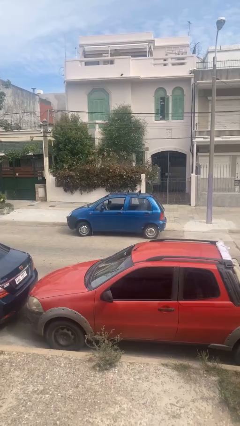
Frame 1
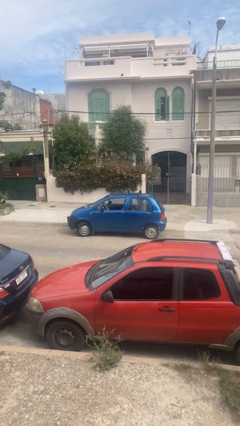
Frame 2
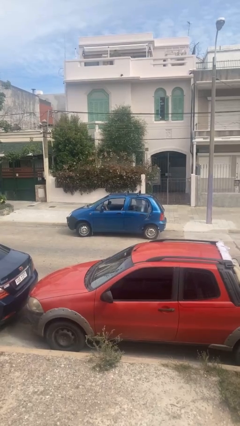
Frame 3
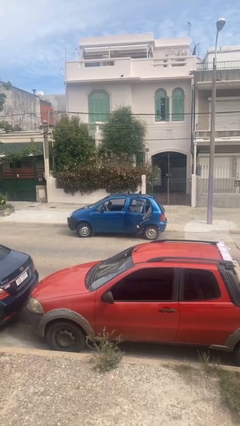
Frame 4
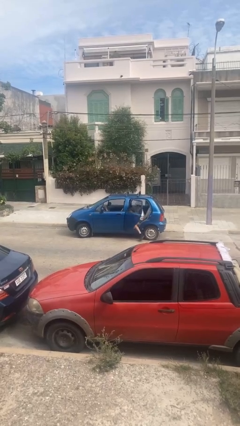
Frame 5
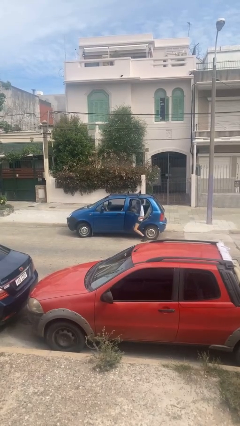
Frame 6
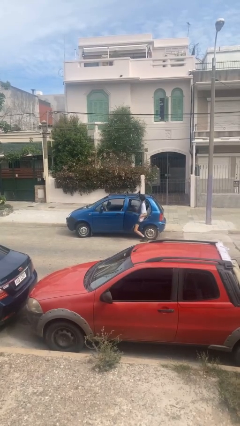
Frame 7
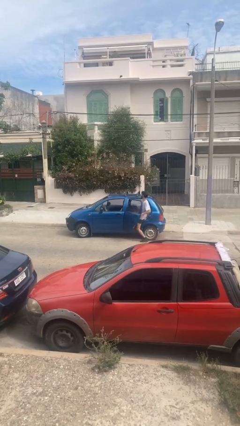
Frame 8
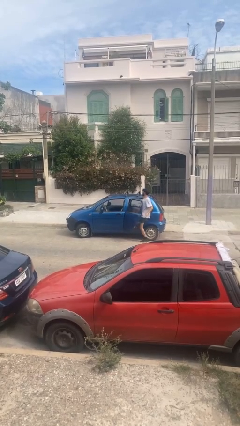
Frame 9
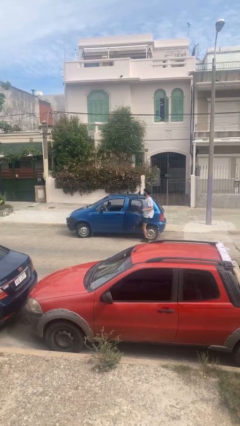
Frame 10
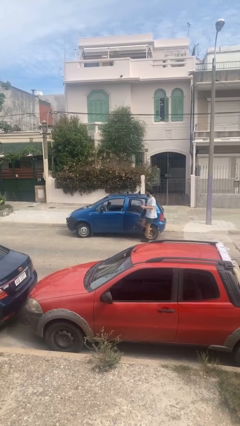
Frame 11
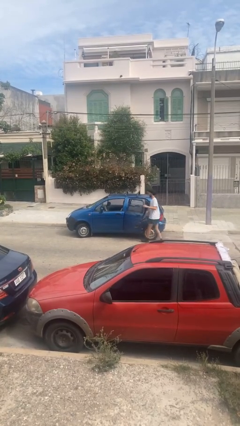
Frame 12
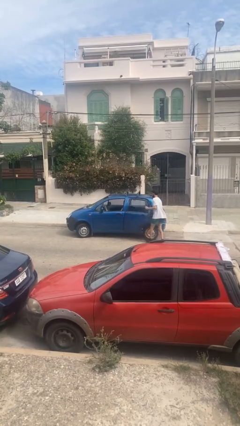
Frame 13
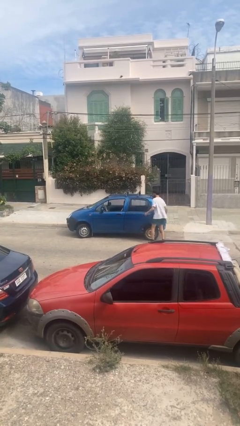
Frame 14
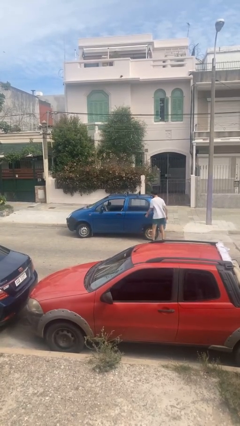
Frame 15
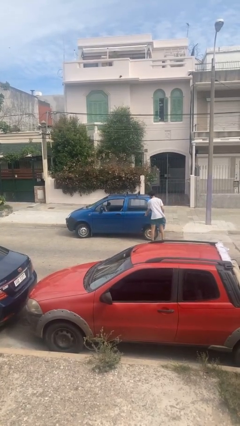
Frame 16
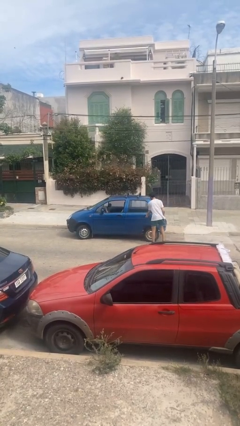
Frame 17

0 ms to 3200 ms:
car drops off person

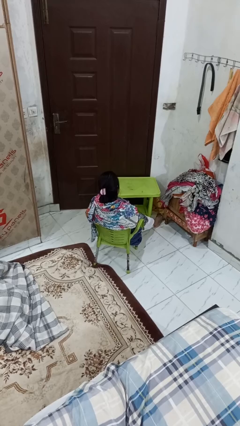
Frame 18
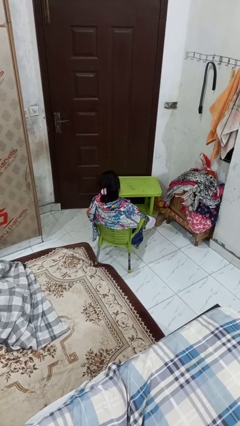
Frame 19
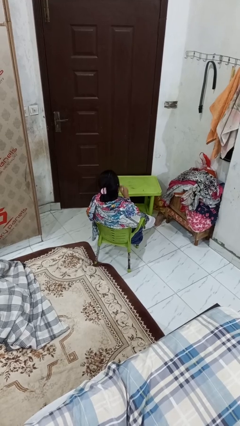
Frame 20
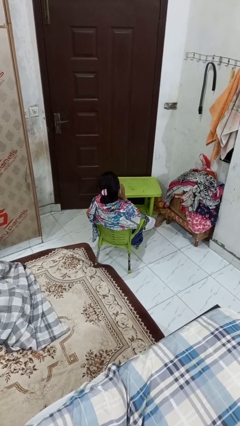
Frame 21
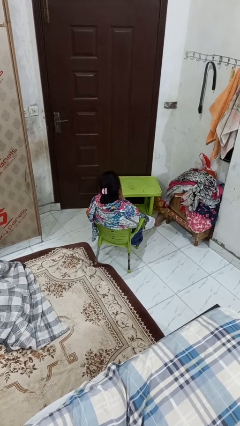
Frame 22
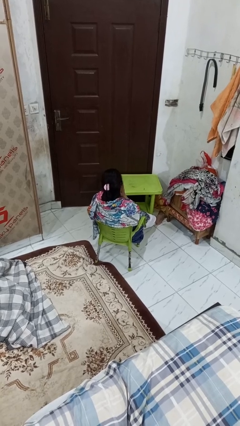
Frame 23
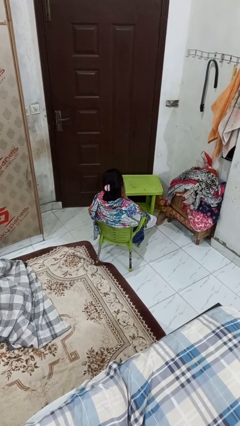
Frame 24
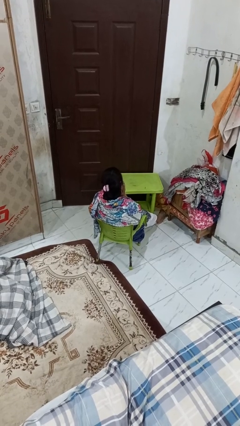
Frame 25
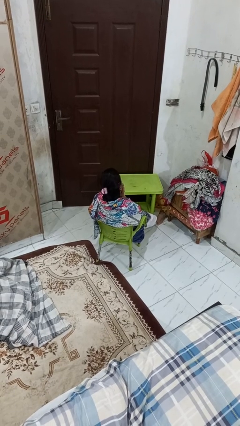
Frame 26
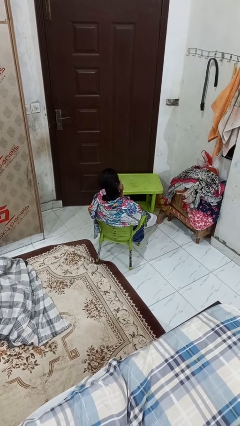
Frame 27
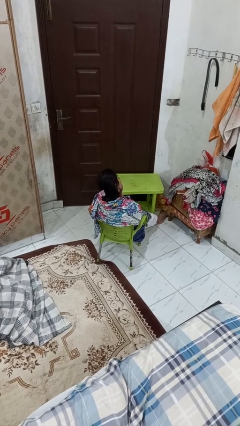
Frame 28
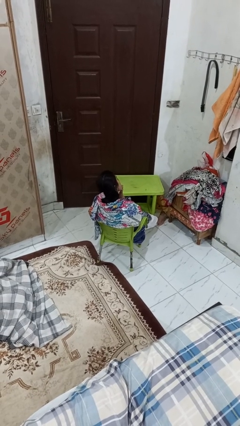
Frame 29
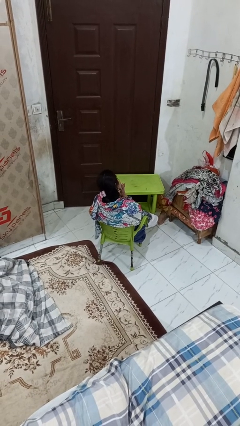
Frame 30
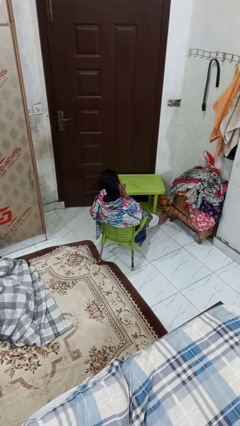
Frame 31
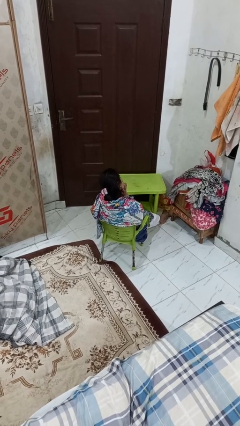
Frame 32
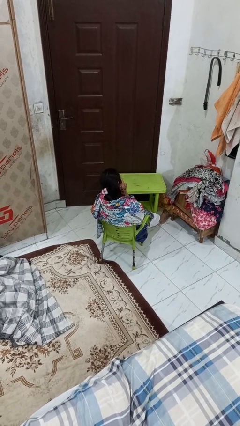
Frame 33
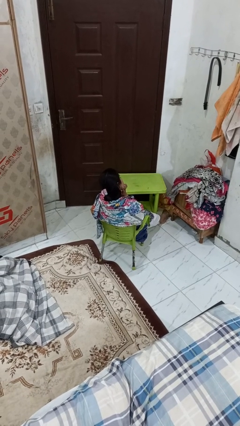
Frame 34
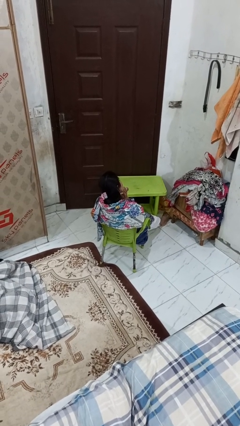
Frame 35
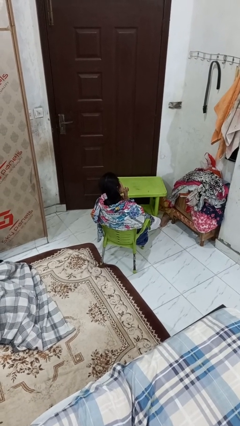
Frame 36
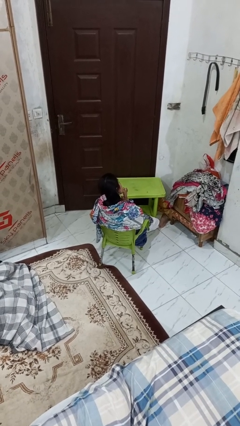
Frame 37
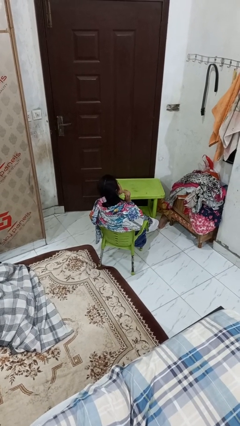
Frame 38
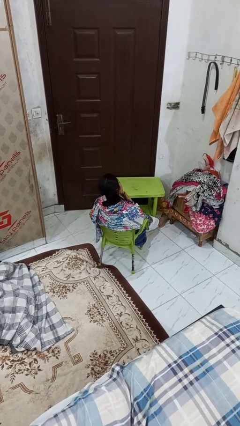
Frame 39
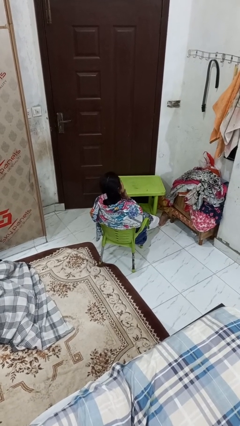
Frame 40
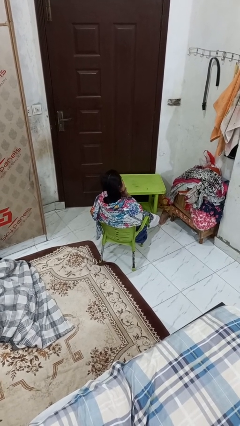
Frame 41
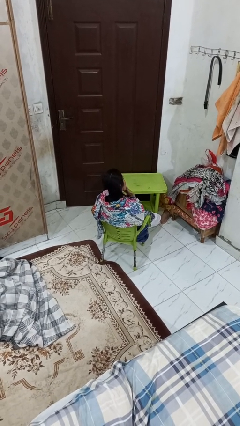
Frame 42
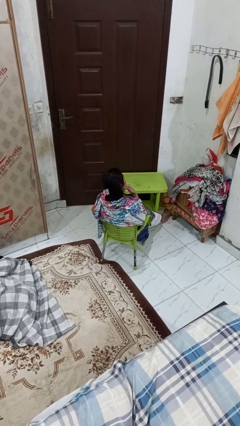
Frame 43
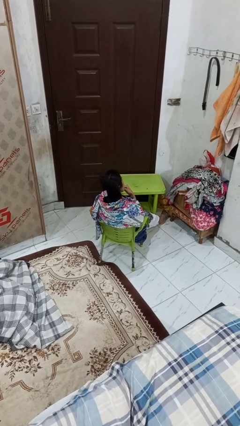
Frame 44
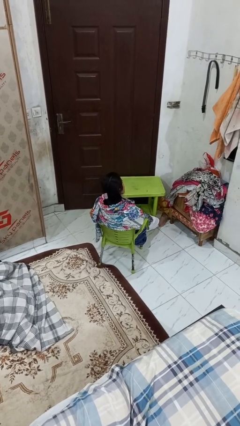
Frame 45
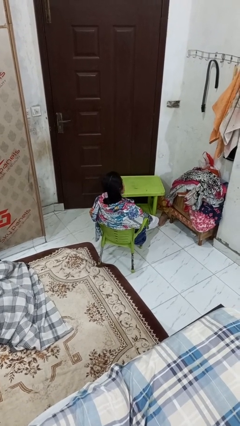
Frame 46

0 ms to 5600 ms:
person strokes chin

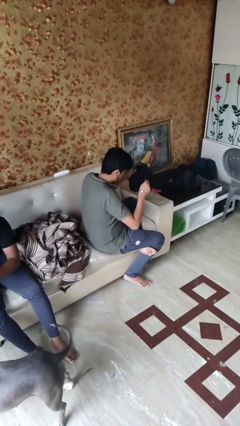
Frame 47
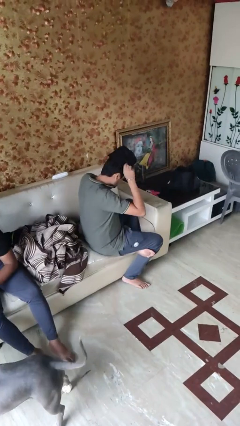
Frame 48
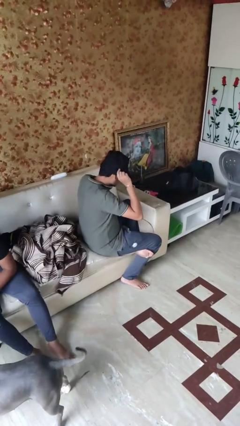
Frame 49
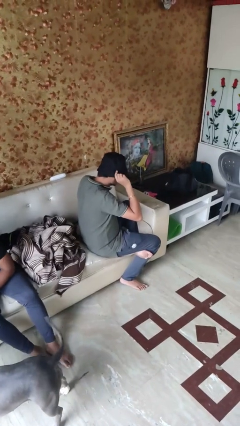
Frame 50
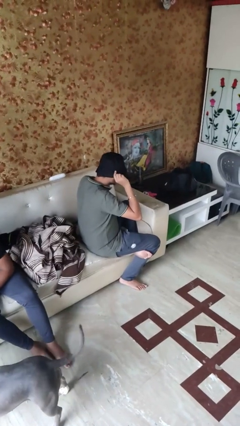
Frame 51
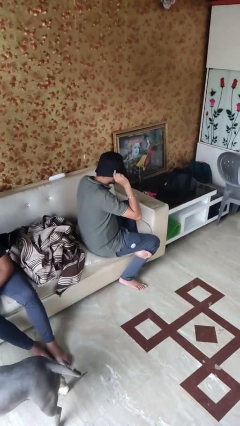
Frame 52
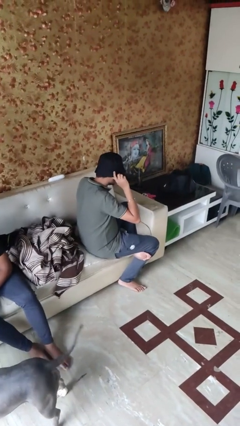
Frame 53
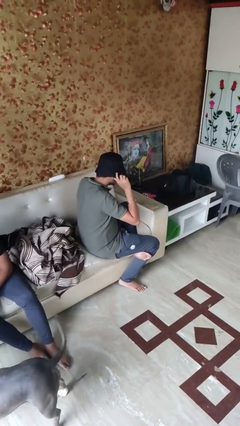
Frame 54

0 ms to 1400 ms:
person puts on hat

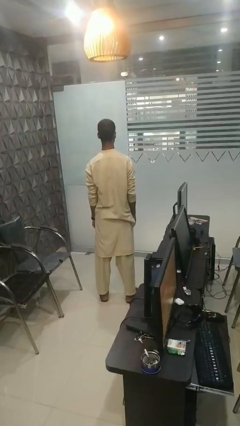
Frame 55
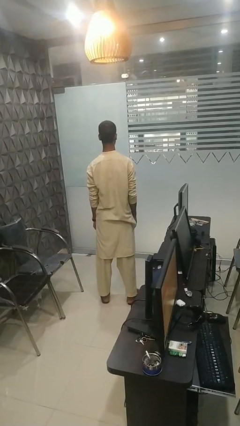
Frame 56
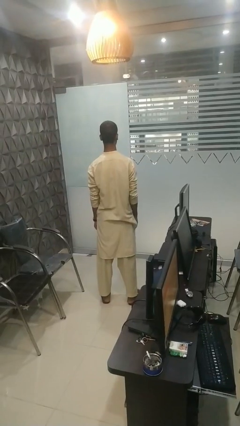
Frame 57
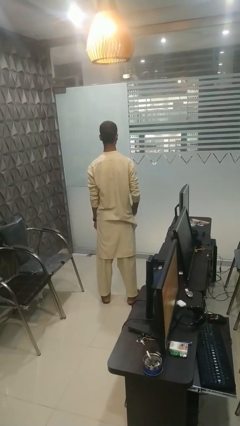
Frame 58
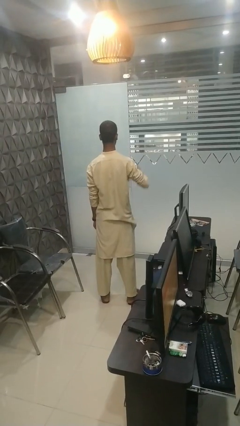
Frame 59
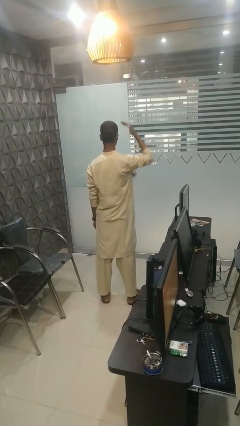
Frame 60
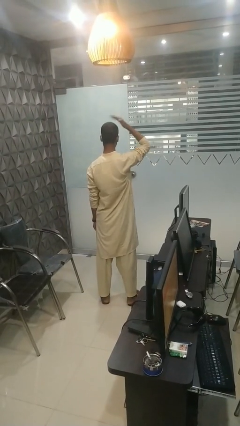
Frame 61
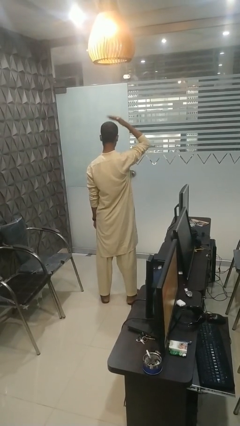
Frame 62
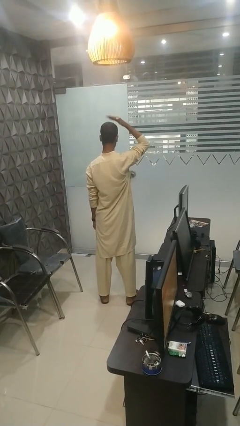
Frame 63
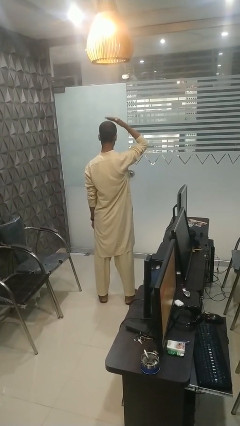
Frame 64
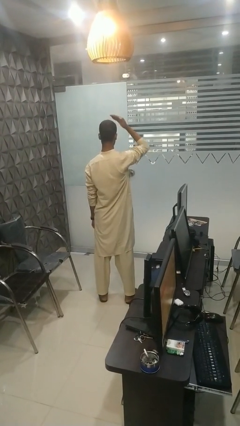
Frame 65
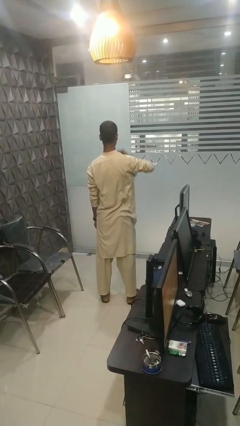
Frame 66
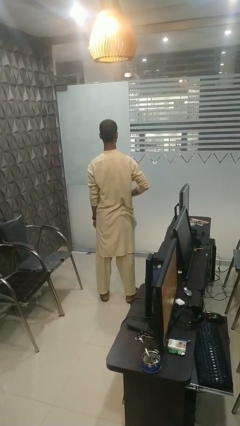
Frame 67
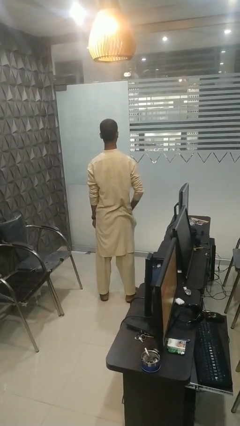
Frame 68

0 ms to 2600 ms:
person pats head

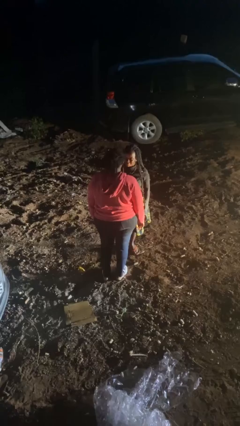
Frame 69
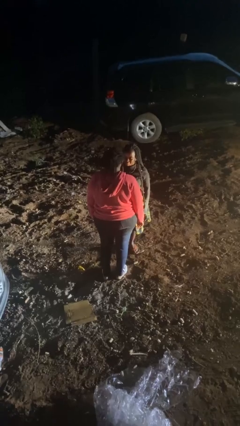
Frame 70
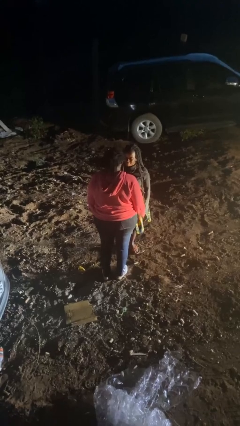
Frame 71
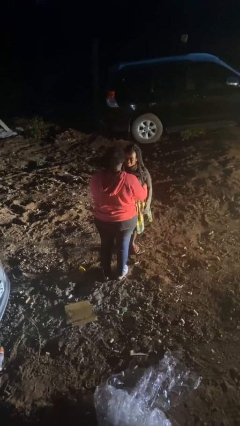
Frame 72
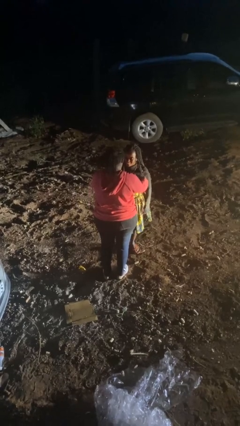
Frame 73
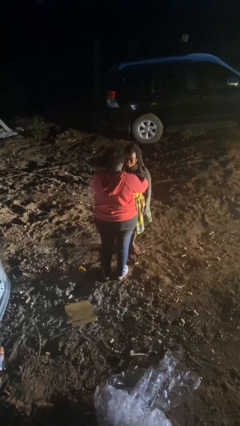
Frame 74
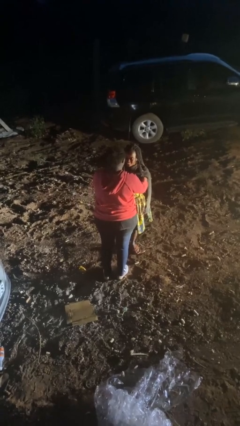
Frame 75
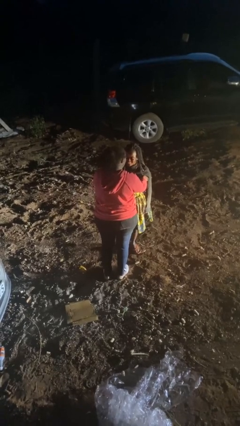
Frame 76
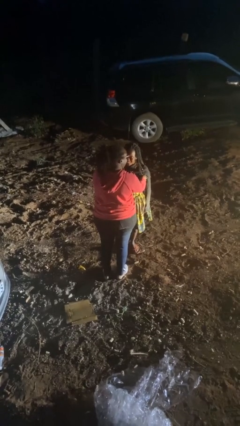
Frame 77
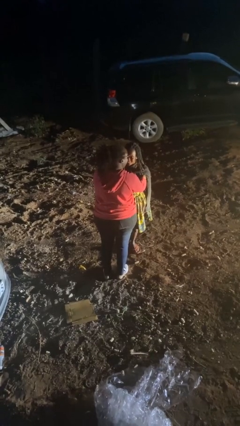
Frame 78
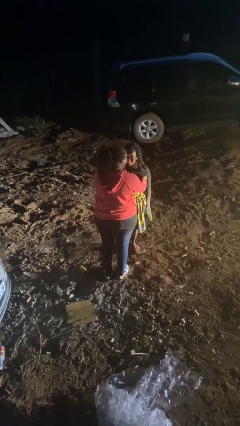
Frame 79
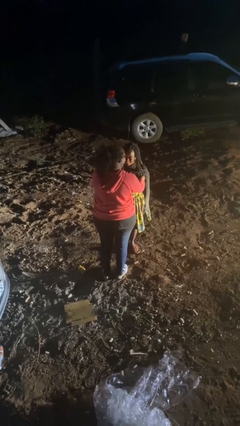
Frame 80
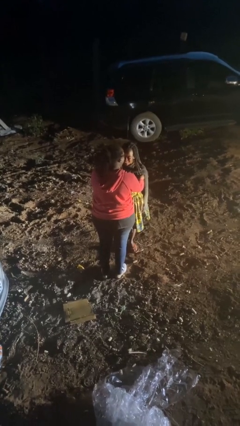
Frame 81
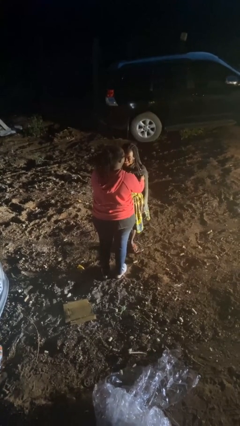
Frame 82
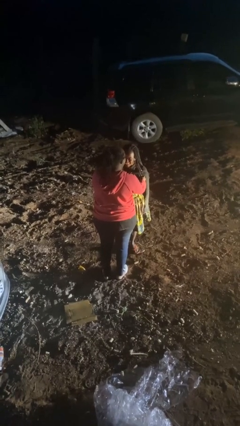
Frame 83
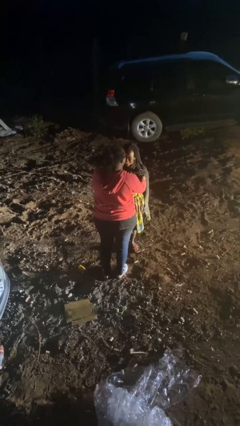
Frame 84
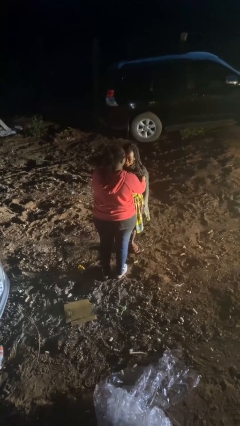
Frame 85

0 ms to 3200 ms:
person tickles person

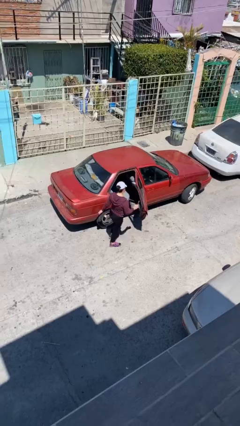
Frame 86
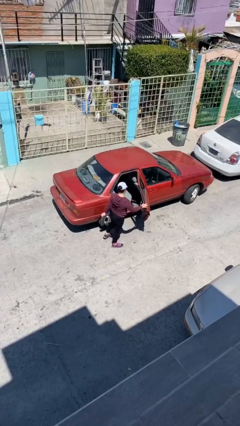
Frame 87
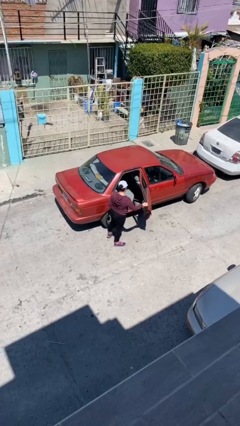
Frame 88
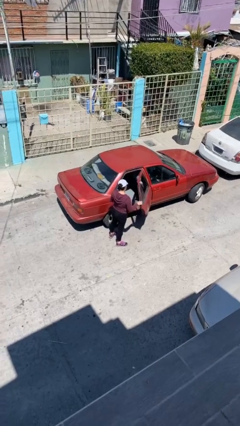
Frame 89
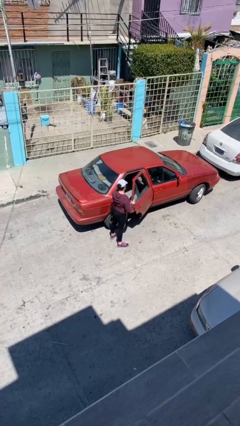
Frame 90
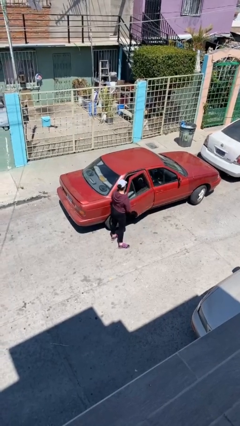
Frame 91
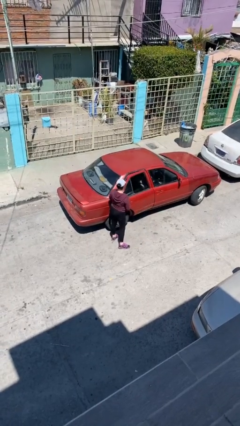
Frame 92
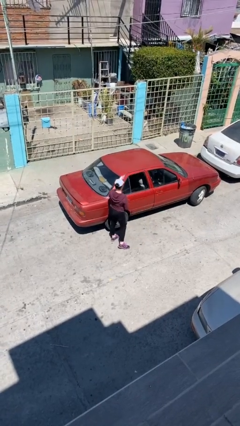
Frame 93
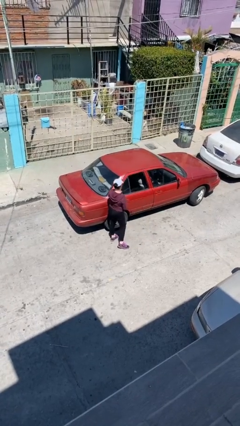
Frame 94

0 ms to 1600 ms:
person closes car door

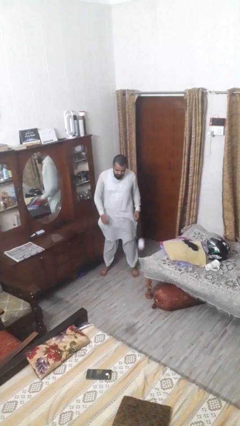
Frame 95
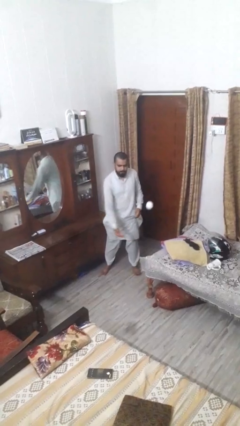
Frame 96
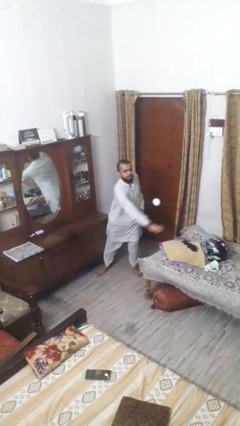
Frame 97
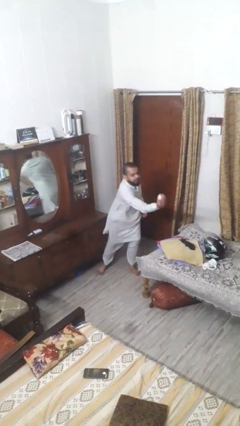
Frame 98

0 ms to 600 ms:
person bounces ball on floor
